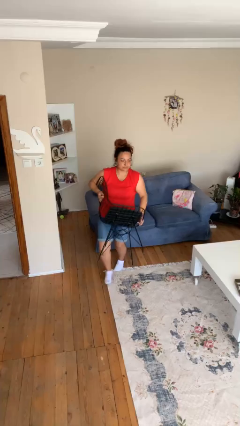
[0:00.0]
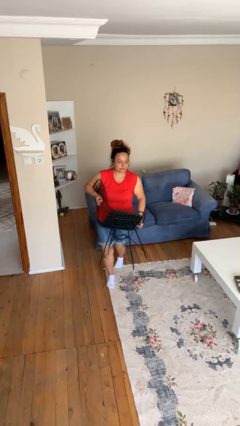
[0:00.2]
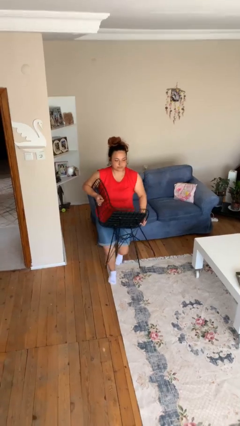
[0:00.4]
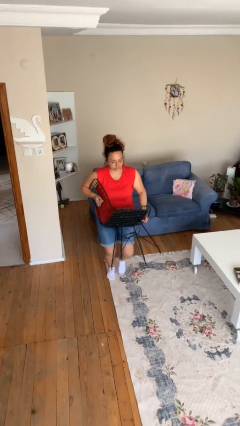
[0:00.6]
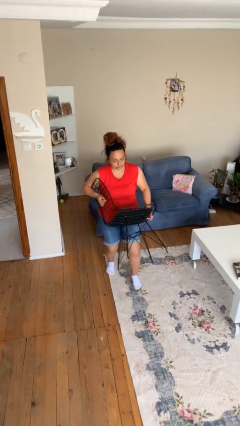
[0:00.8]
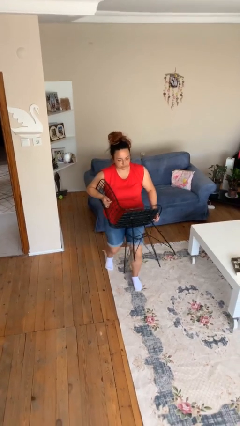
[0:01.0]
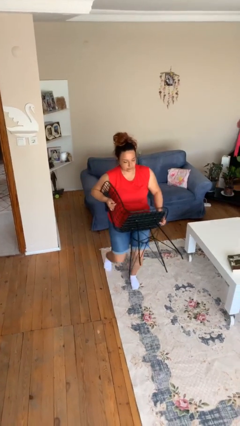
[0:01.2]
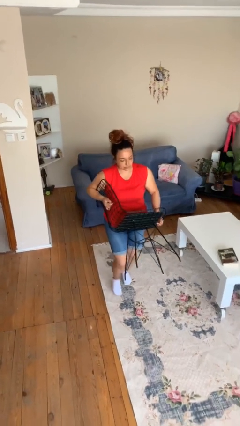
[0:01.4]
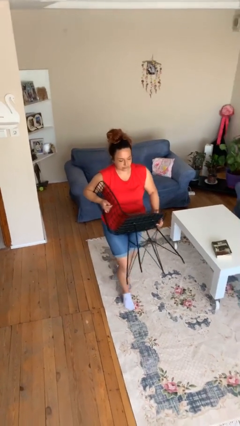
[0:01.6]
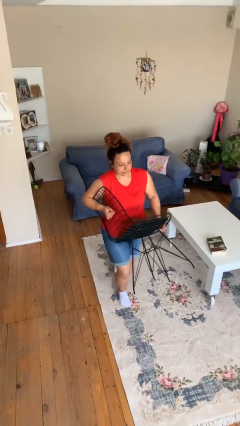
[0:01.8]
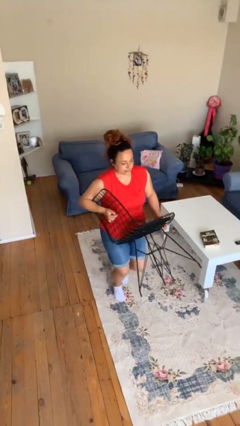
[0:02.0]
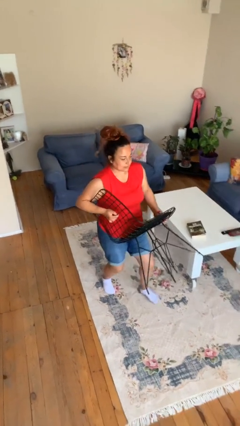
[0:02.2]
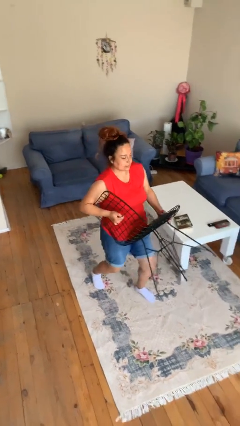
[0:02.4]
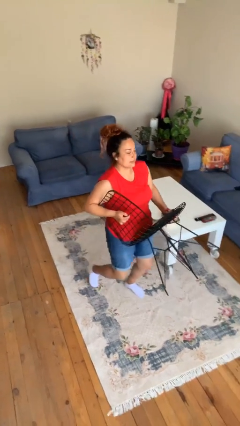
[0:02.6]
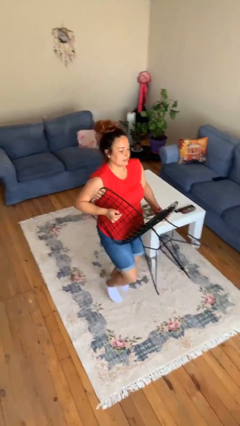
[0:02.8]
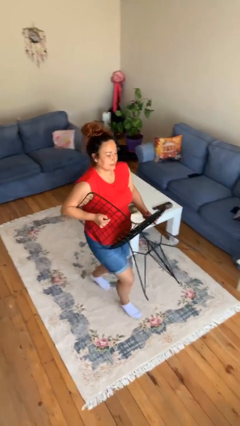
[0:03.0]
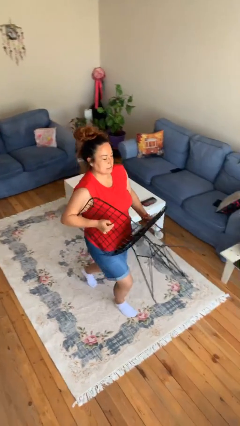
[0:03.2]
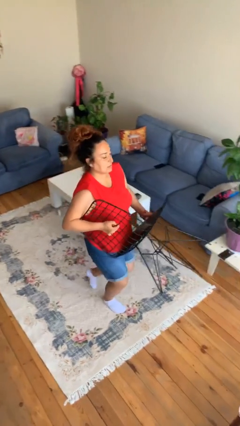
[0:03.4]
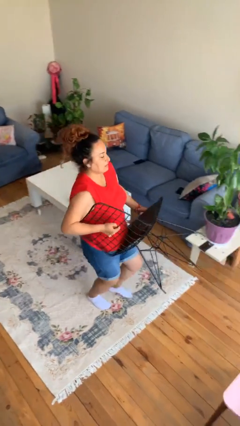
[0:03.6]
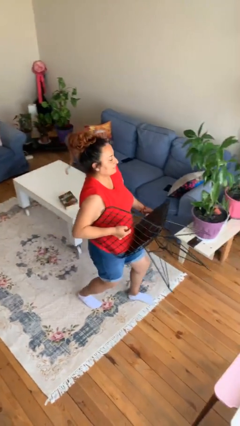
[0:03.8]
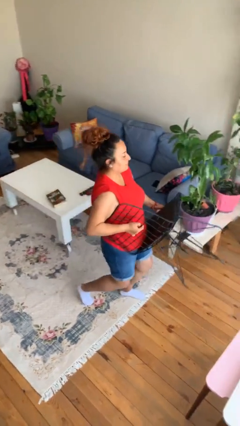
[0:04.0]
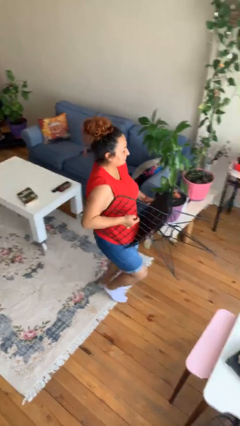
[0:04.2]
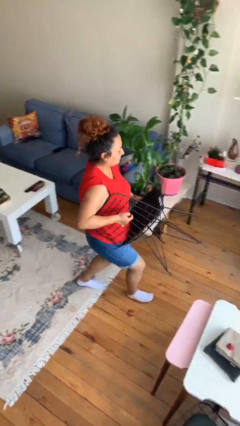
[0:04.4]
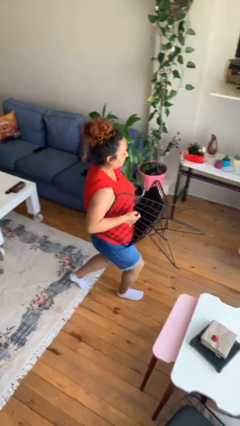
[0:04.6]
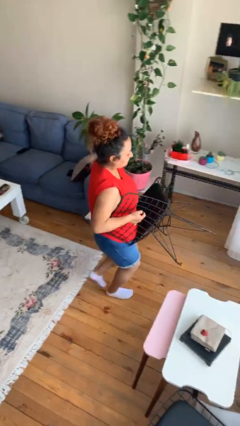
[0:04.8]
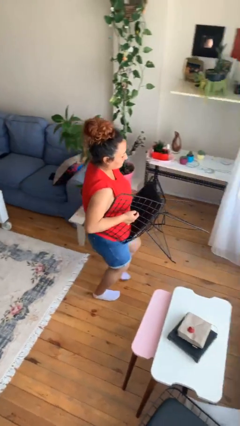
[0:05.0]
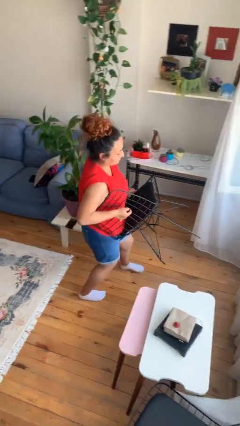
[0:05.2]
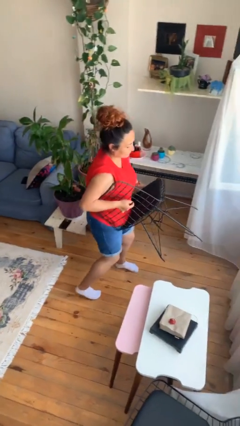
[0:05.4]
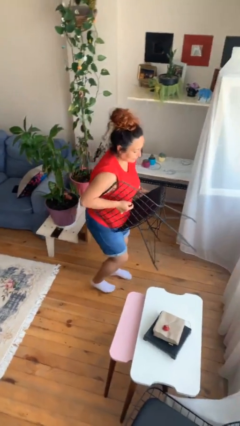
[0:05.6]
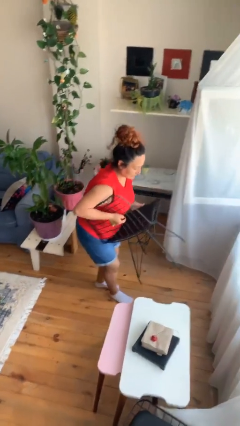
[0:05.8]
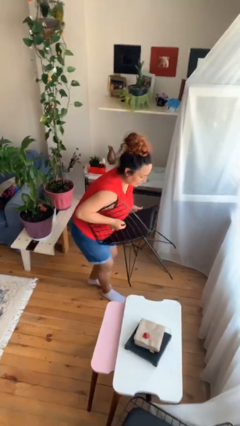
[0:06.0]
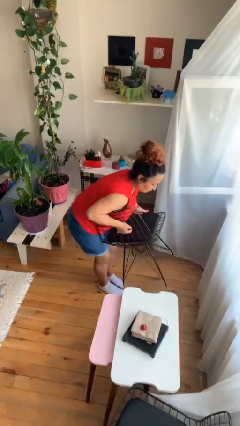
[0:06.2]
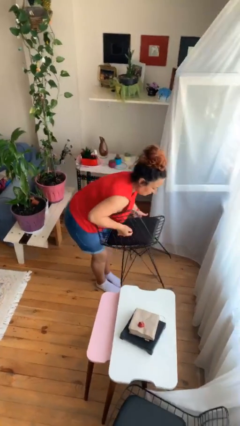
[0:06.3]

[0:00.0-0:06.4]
person carries heavy object

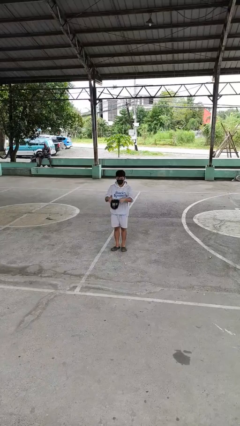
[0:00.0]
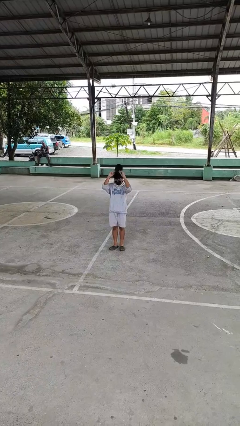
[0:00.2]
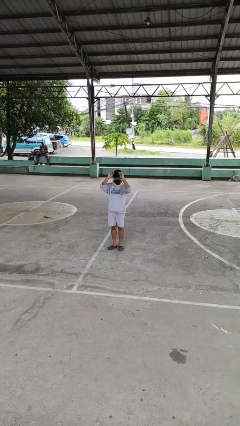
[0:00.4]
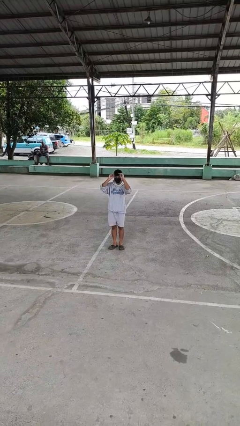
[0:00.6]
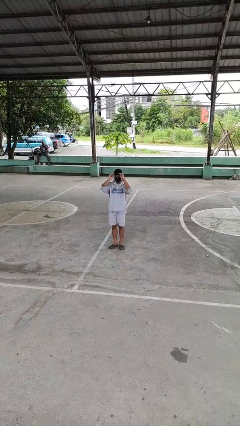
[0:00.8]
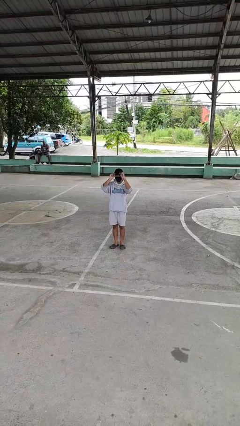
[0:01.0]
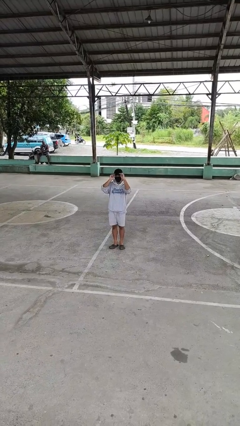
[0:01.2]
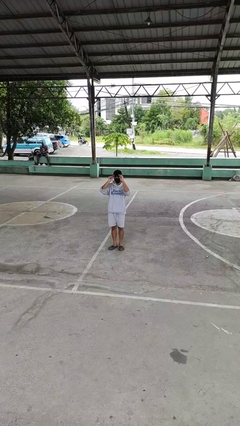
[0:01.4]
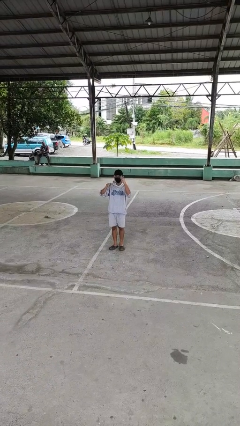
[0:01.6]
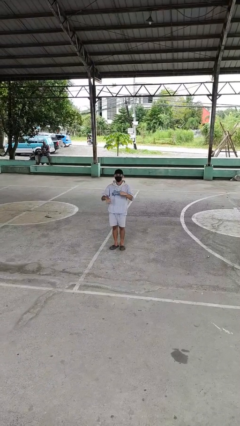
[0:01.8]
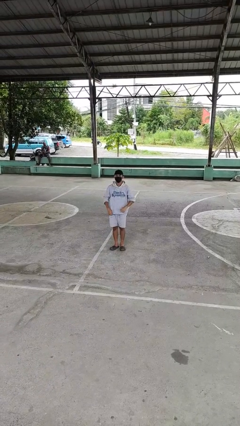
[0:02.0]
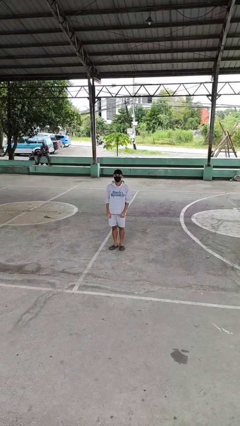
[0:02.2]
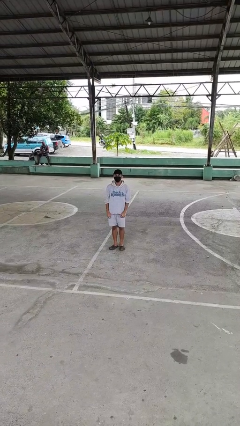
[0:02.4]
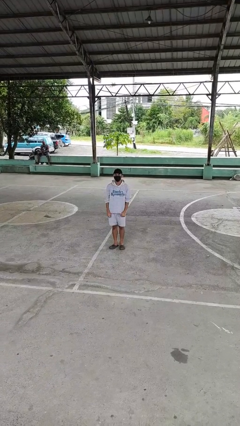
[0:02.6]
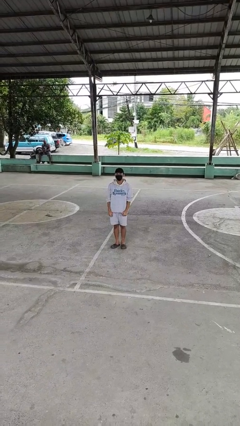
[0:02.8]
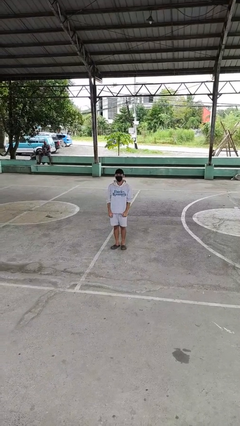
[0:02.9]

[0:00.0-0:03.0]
person puts on hat

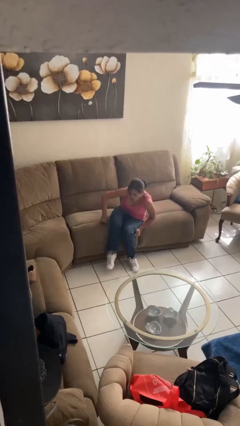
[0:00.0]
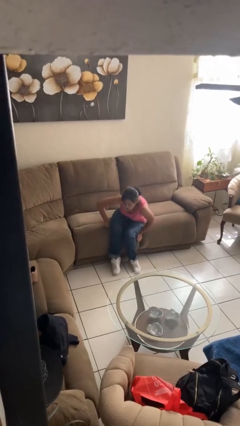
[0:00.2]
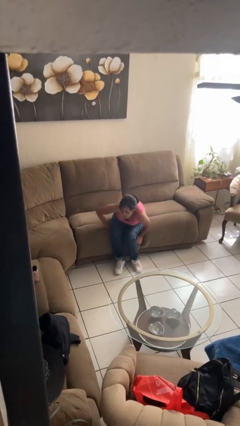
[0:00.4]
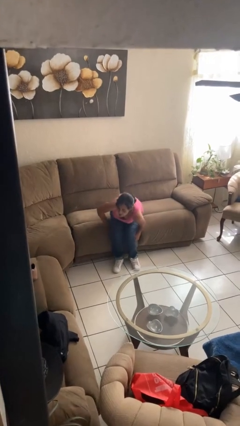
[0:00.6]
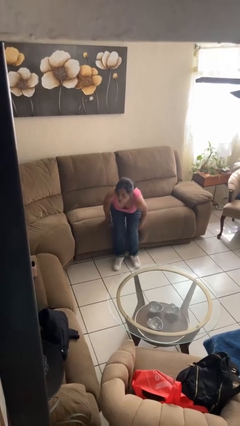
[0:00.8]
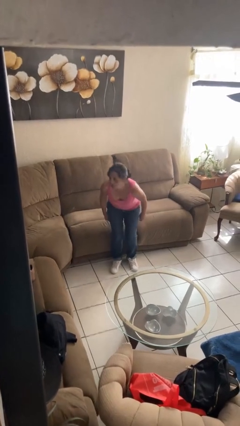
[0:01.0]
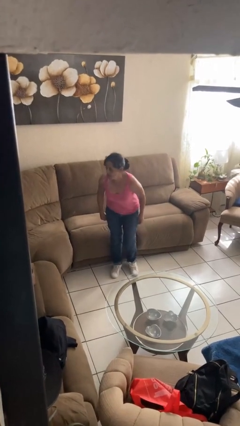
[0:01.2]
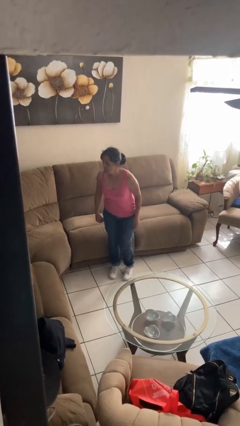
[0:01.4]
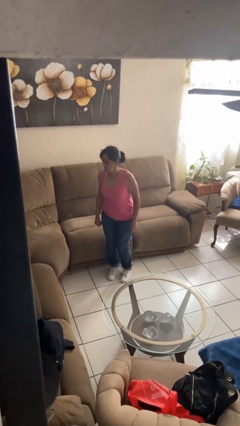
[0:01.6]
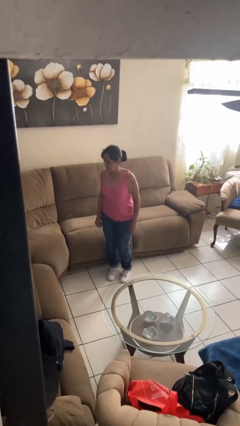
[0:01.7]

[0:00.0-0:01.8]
person stands up

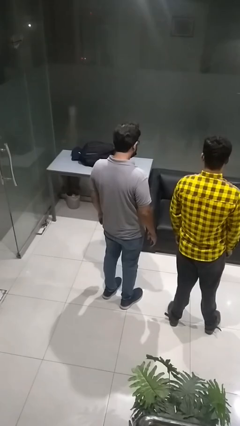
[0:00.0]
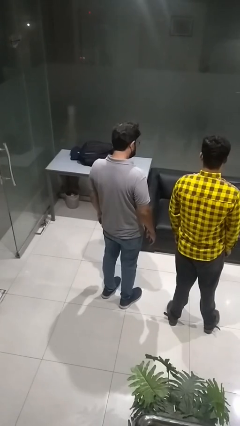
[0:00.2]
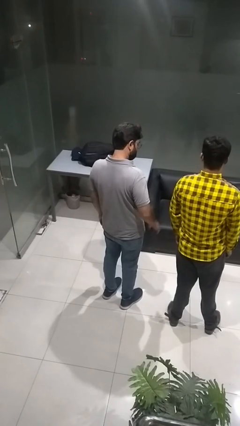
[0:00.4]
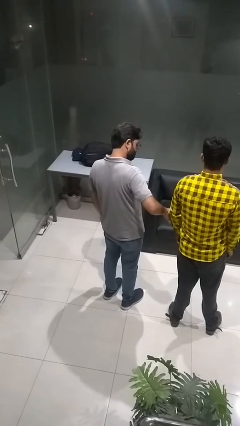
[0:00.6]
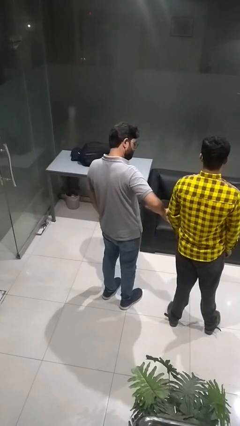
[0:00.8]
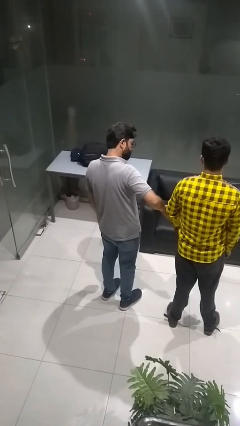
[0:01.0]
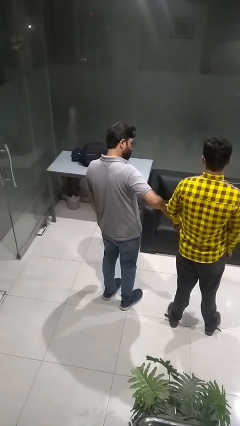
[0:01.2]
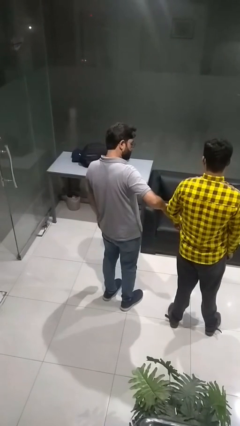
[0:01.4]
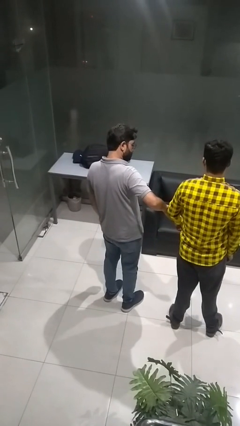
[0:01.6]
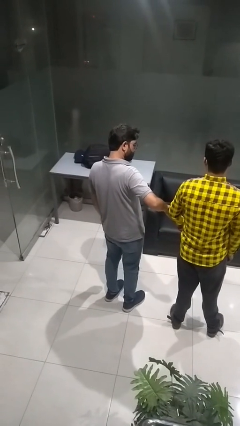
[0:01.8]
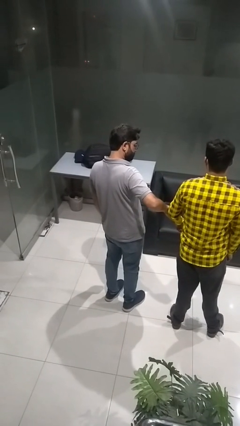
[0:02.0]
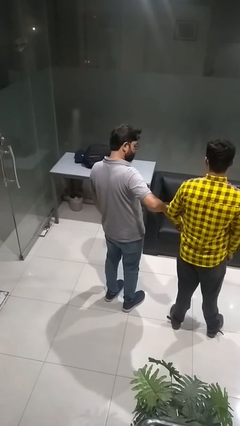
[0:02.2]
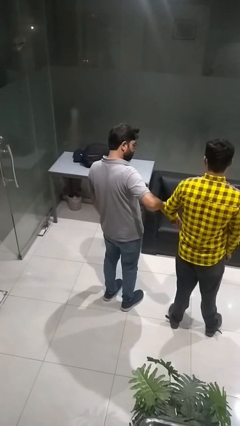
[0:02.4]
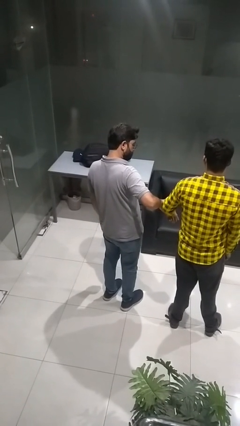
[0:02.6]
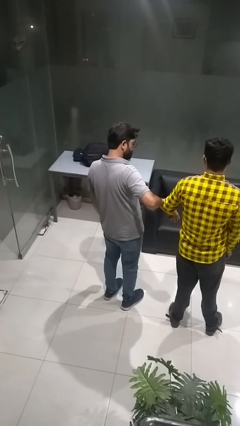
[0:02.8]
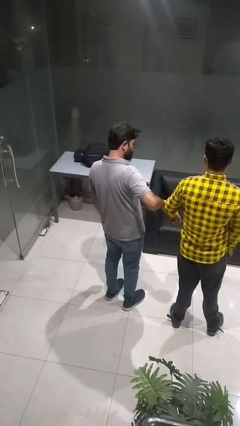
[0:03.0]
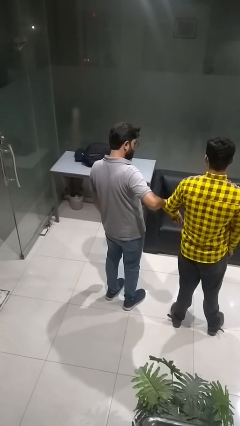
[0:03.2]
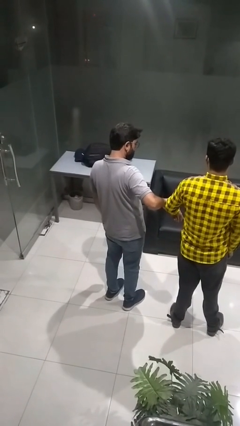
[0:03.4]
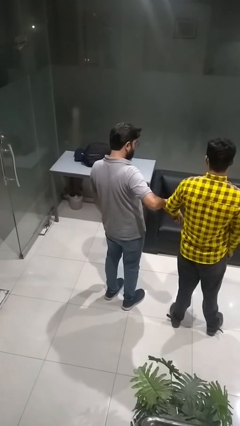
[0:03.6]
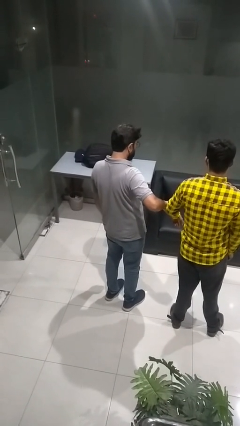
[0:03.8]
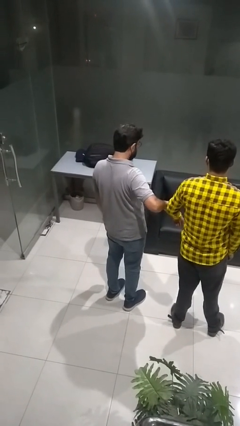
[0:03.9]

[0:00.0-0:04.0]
person grabs person by forearm

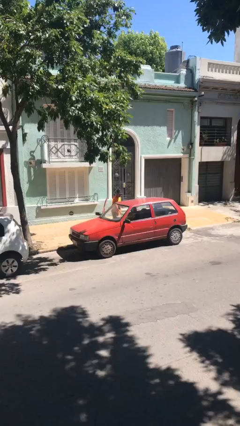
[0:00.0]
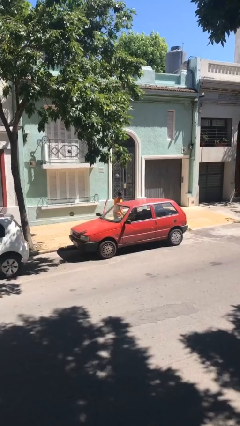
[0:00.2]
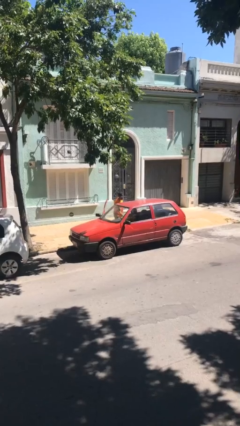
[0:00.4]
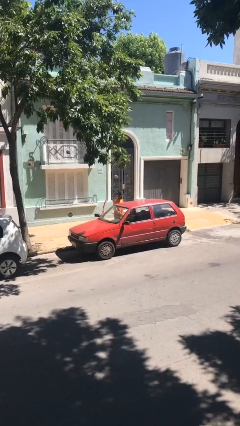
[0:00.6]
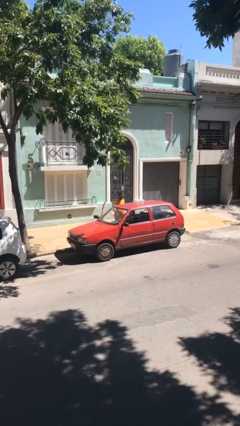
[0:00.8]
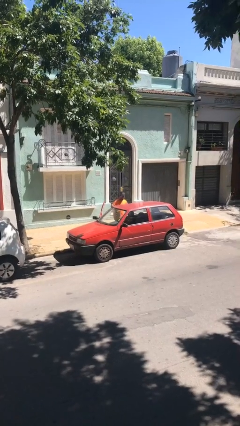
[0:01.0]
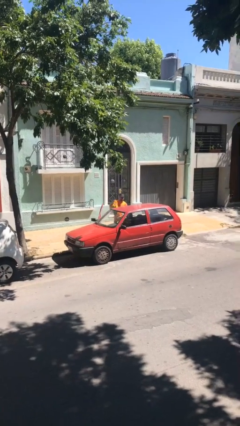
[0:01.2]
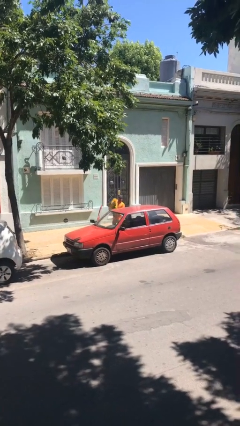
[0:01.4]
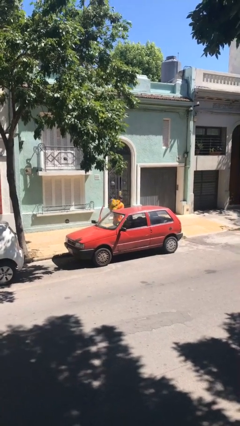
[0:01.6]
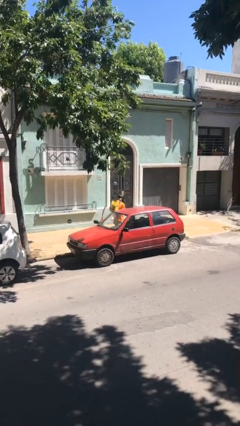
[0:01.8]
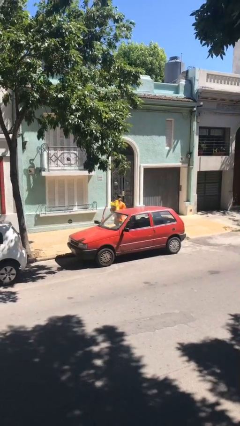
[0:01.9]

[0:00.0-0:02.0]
person unloads car

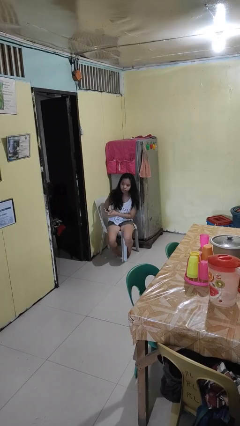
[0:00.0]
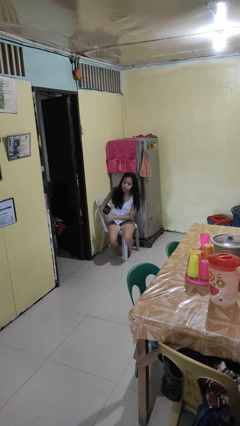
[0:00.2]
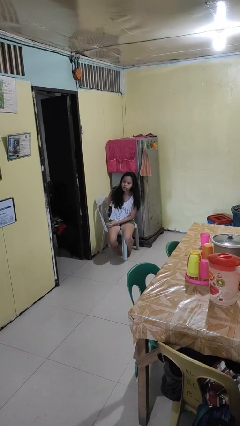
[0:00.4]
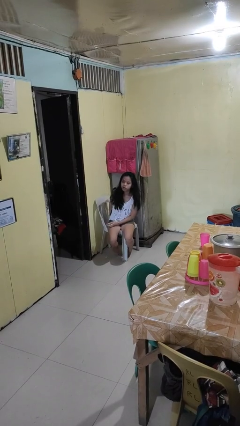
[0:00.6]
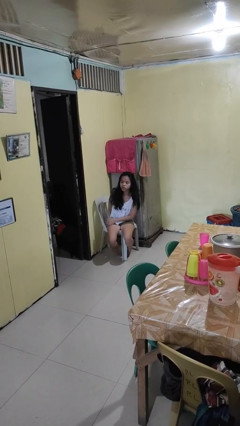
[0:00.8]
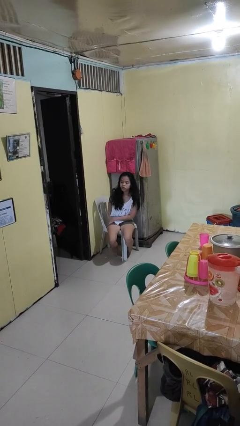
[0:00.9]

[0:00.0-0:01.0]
person puts phone into pocket
